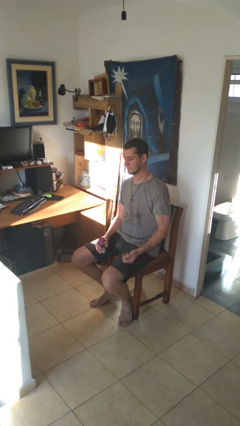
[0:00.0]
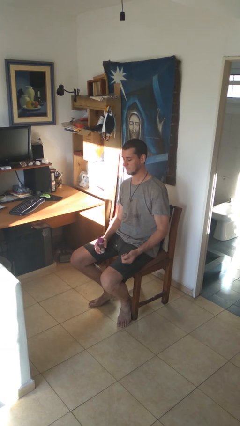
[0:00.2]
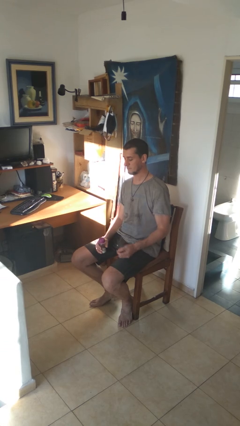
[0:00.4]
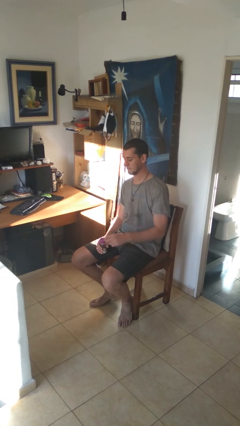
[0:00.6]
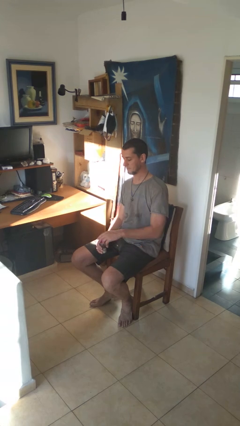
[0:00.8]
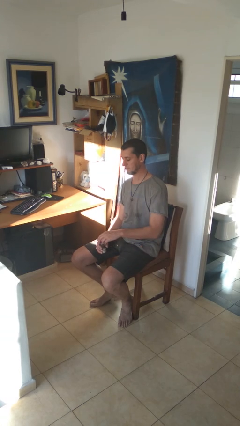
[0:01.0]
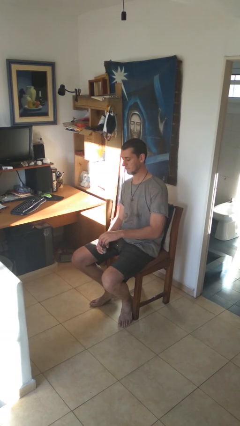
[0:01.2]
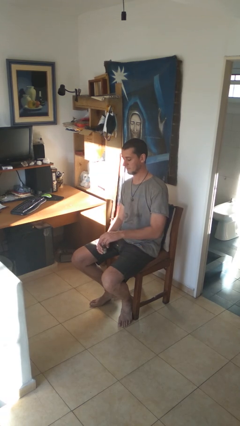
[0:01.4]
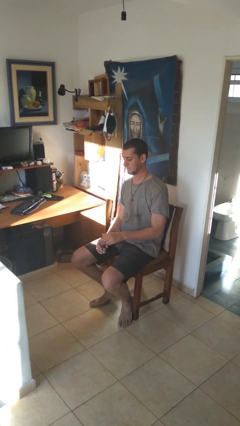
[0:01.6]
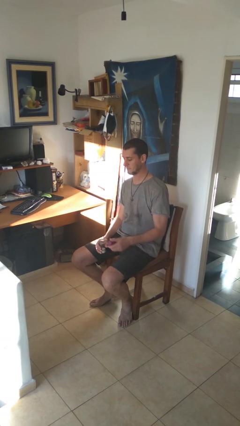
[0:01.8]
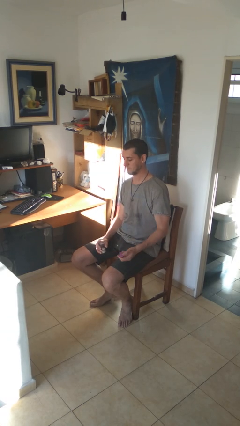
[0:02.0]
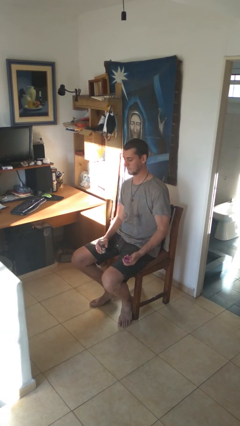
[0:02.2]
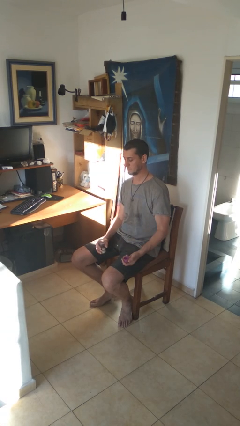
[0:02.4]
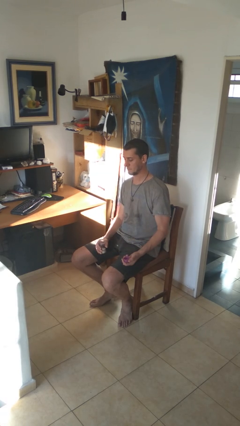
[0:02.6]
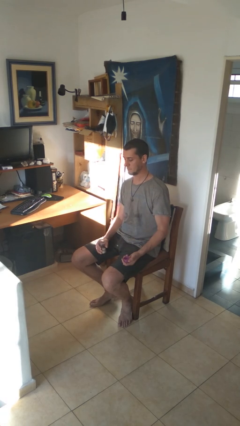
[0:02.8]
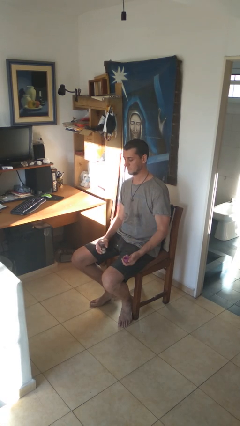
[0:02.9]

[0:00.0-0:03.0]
person opens jar

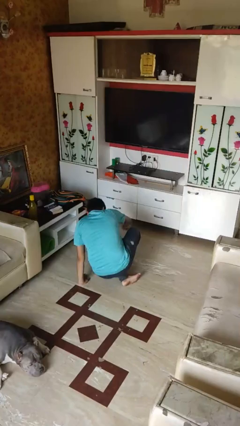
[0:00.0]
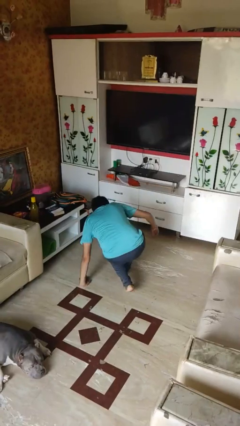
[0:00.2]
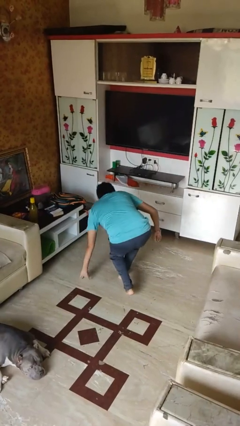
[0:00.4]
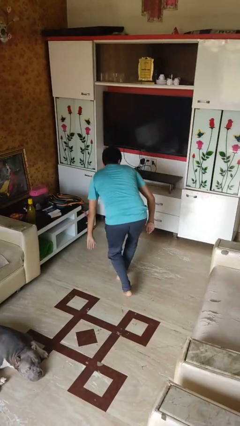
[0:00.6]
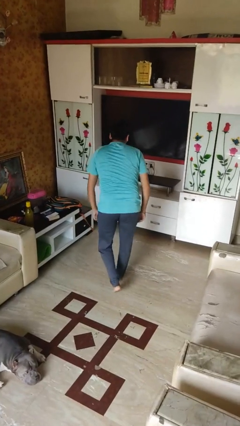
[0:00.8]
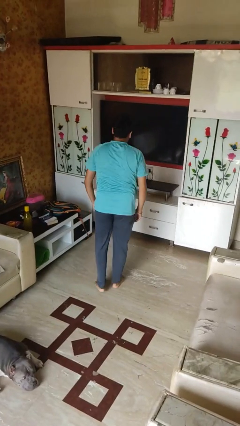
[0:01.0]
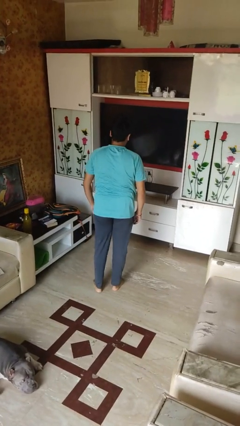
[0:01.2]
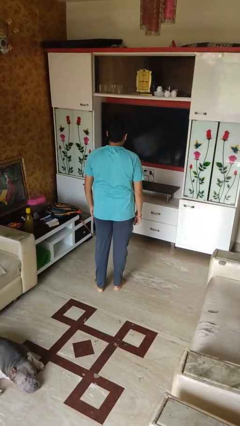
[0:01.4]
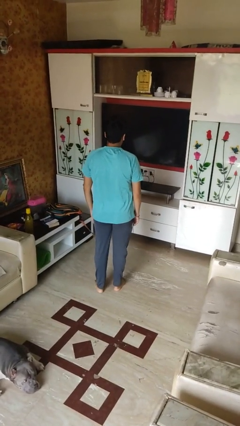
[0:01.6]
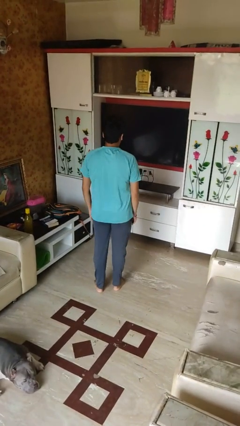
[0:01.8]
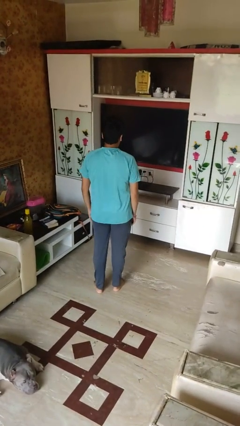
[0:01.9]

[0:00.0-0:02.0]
person stands up from floor

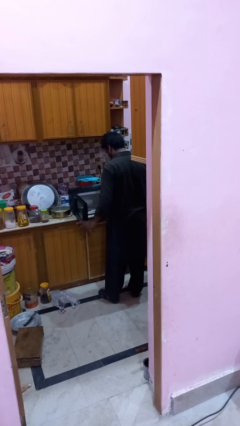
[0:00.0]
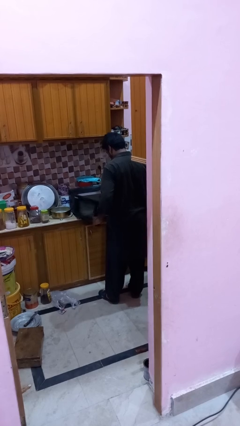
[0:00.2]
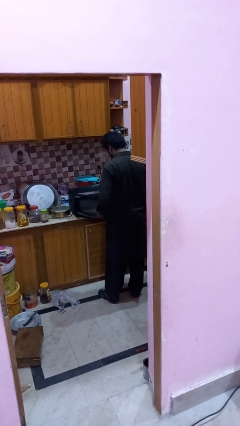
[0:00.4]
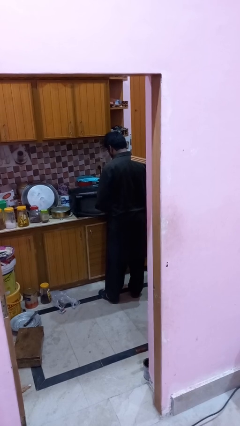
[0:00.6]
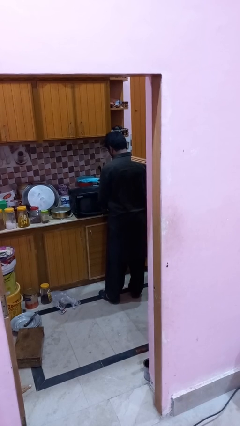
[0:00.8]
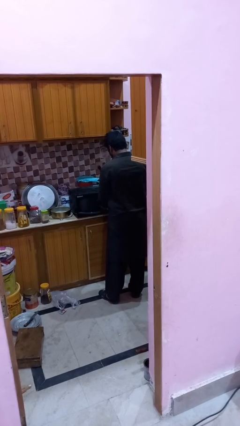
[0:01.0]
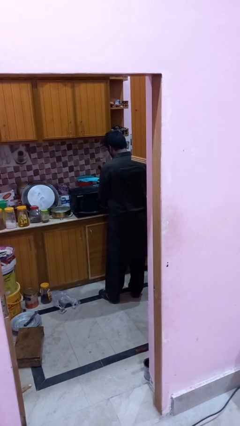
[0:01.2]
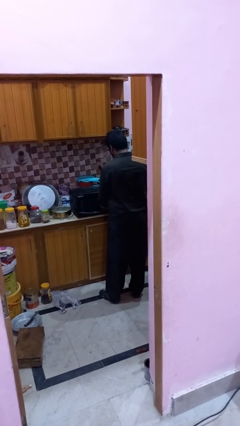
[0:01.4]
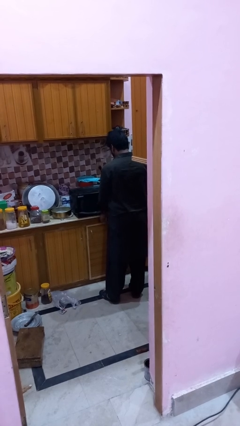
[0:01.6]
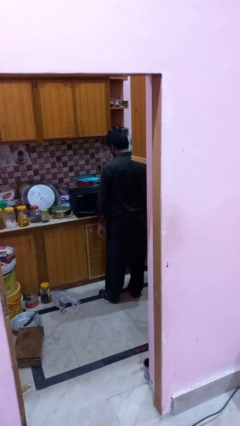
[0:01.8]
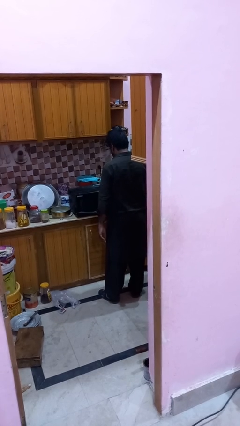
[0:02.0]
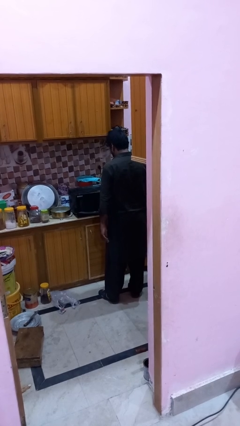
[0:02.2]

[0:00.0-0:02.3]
person closes oven door

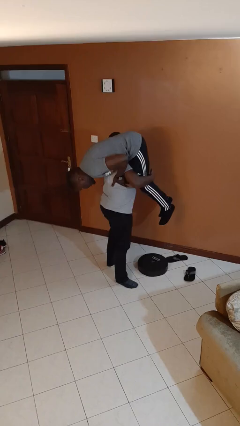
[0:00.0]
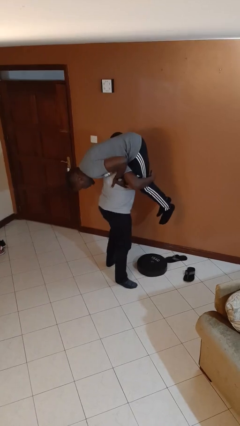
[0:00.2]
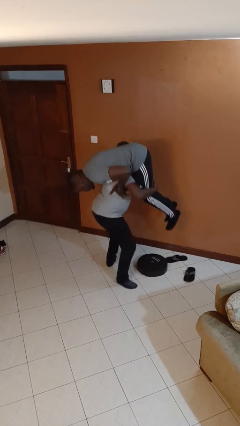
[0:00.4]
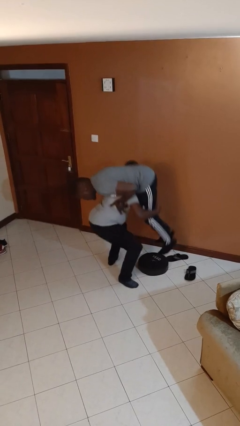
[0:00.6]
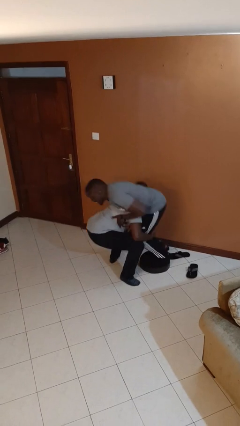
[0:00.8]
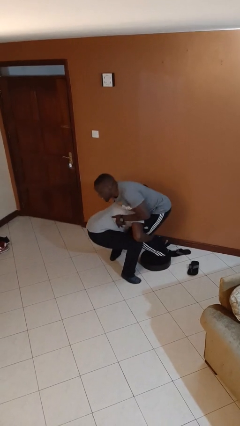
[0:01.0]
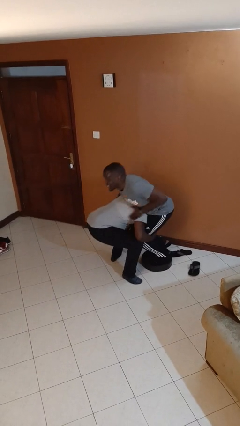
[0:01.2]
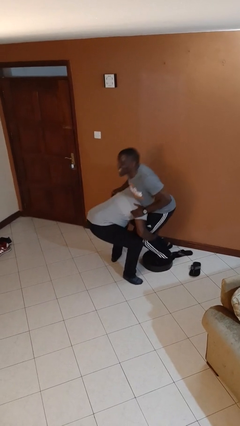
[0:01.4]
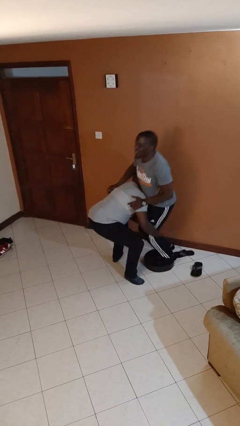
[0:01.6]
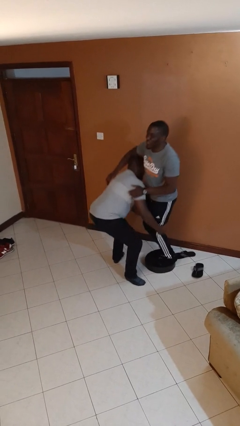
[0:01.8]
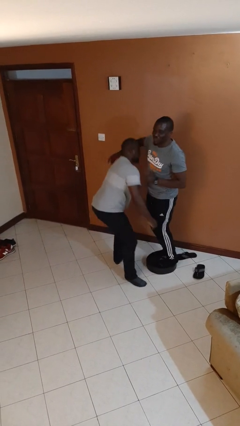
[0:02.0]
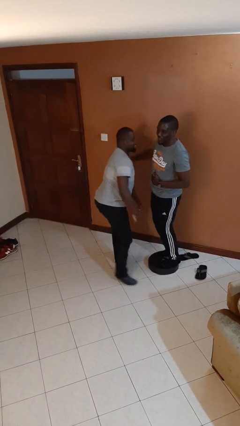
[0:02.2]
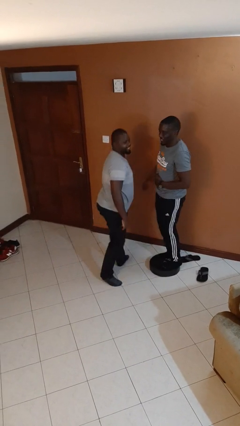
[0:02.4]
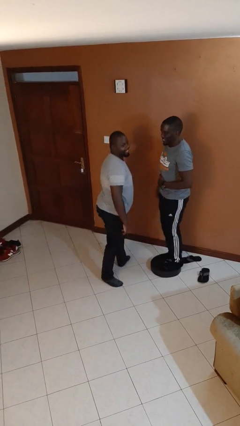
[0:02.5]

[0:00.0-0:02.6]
person puts down person

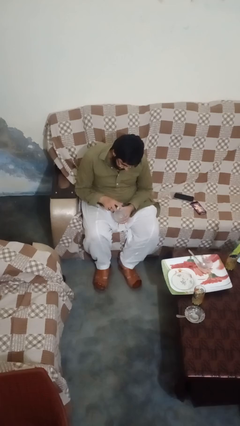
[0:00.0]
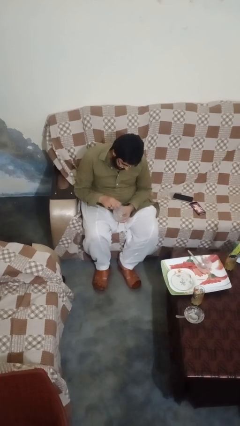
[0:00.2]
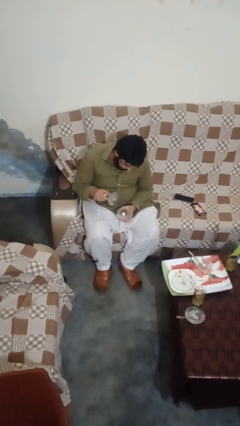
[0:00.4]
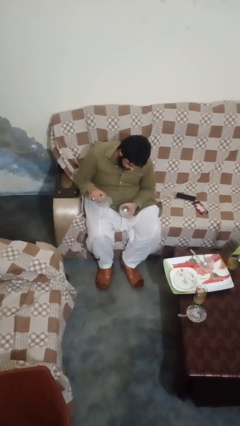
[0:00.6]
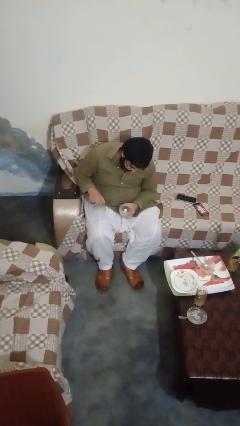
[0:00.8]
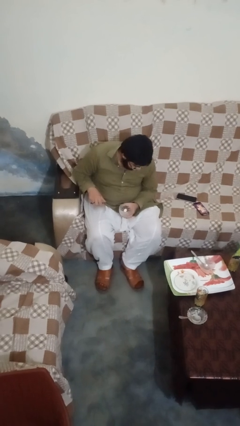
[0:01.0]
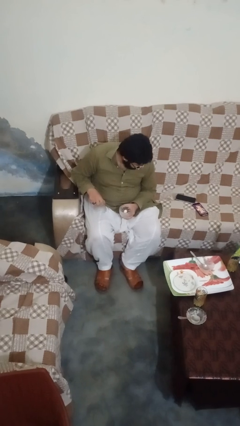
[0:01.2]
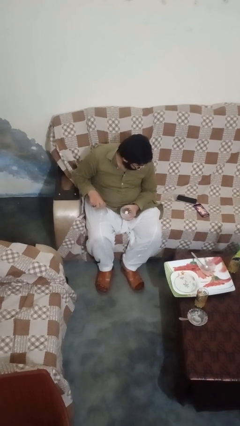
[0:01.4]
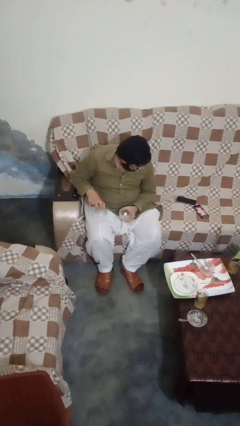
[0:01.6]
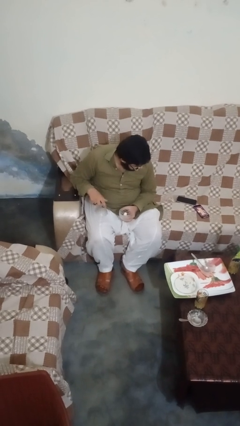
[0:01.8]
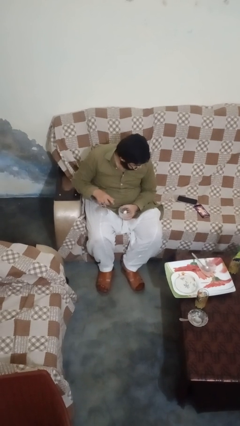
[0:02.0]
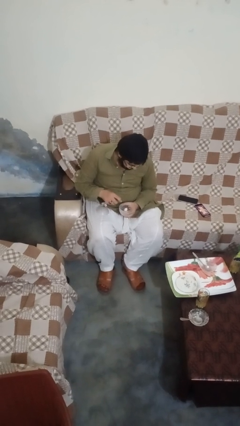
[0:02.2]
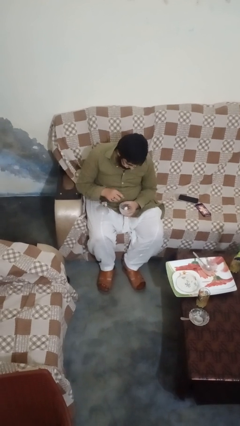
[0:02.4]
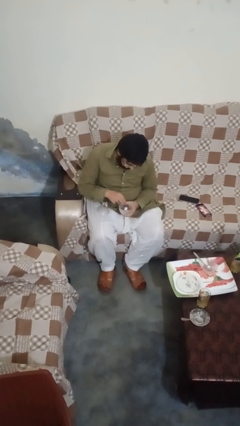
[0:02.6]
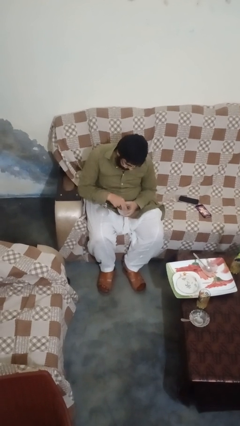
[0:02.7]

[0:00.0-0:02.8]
person opens jewelry box

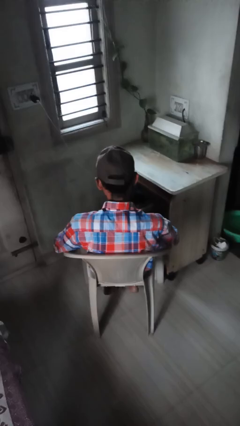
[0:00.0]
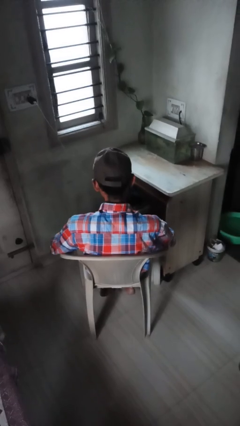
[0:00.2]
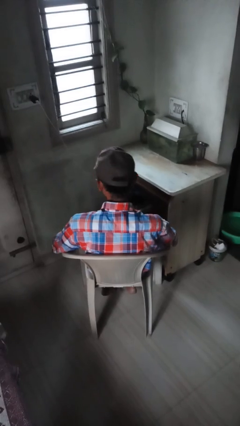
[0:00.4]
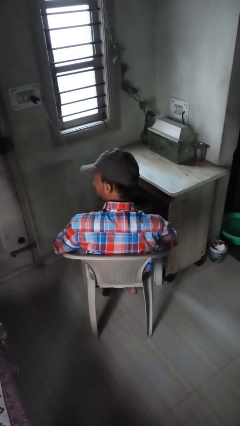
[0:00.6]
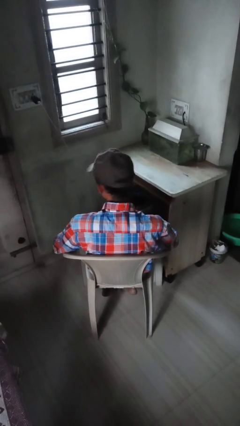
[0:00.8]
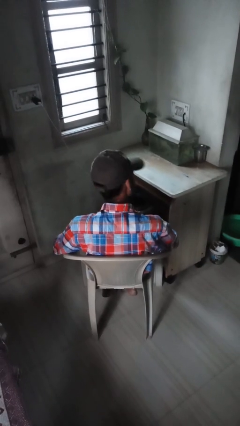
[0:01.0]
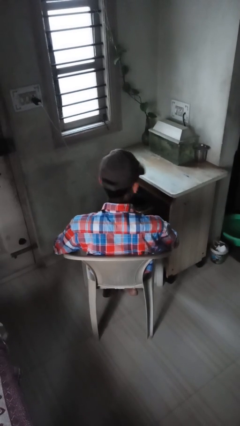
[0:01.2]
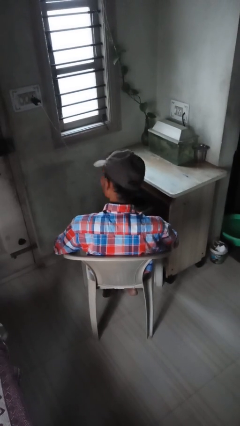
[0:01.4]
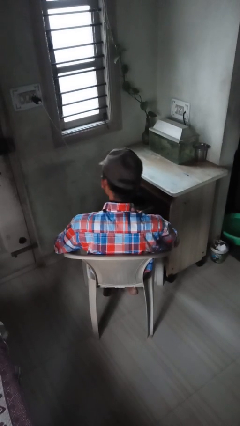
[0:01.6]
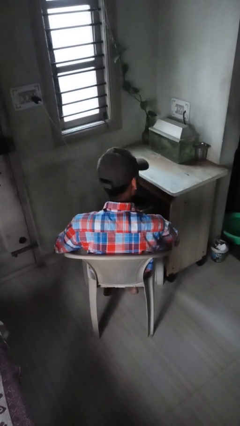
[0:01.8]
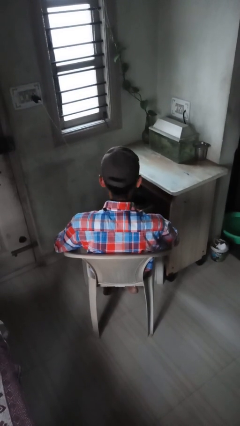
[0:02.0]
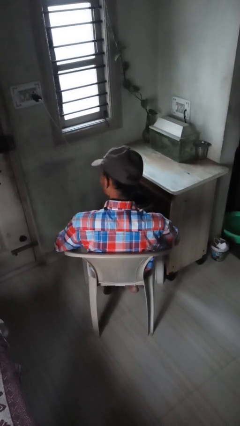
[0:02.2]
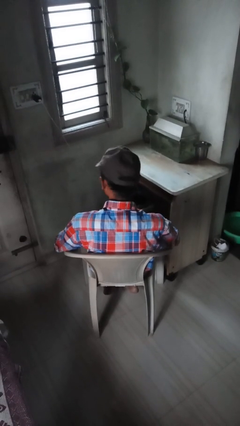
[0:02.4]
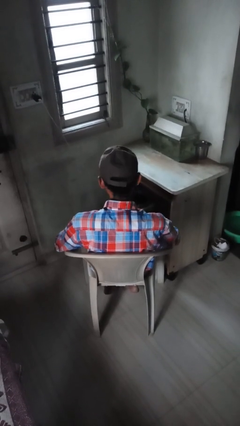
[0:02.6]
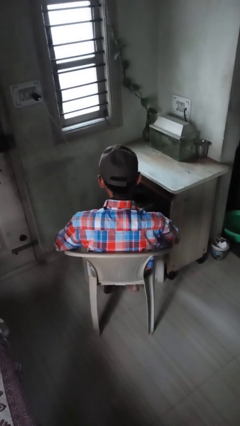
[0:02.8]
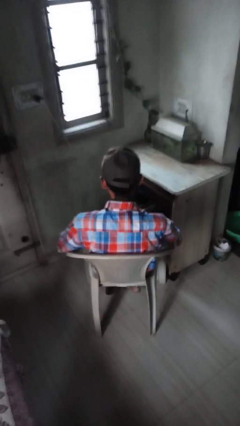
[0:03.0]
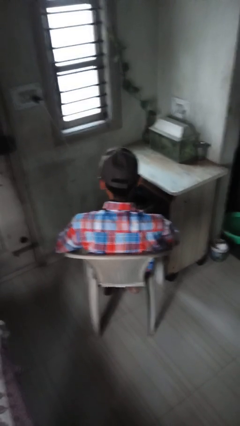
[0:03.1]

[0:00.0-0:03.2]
person shakes head

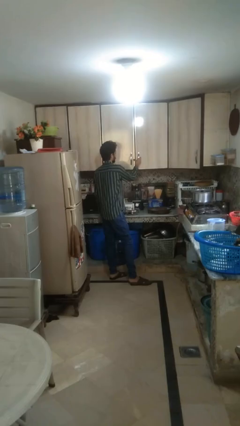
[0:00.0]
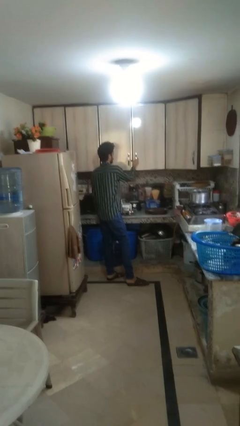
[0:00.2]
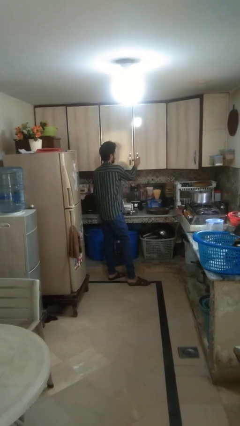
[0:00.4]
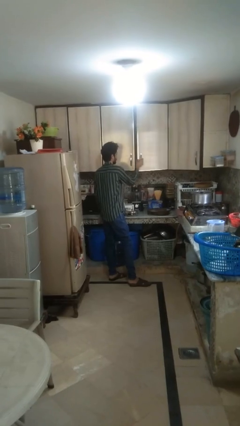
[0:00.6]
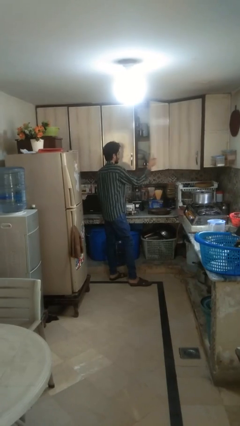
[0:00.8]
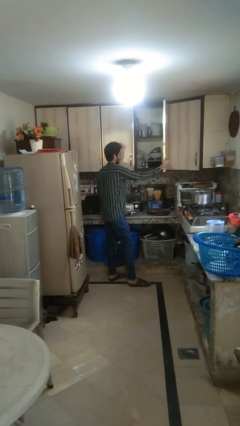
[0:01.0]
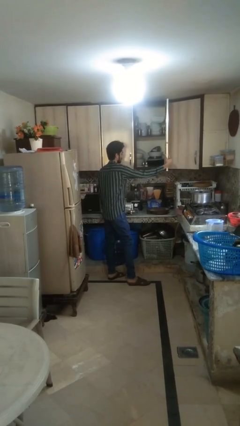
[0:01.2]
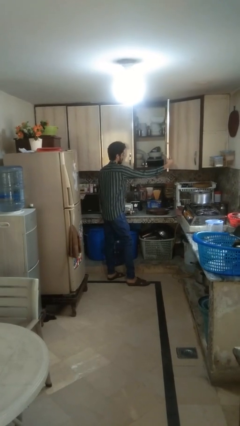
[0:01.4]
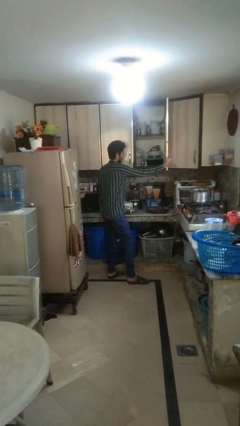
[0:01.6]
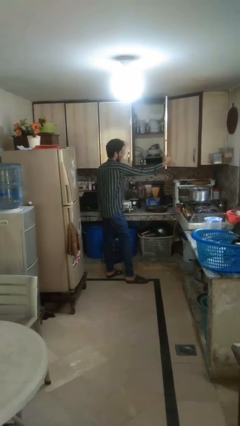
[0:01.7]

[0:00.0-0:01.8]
person opens cabinet
